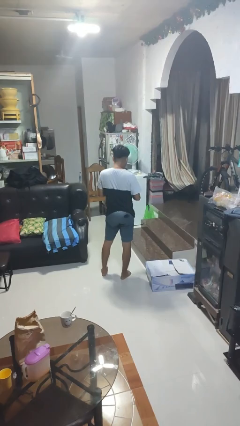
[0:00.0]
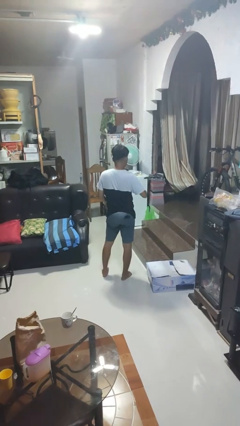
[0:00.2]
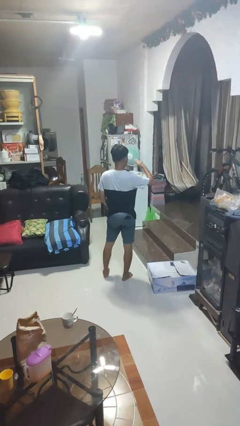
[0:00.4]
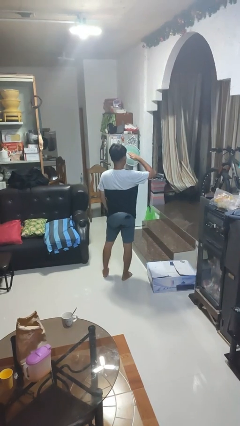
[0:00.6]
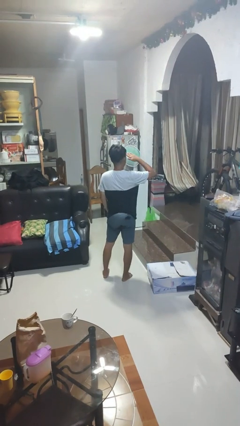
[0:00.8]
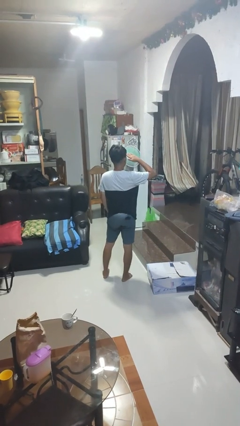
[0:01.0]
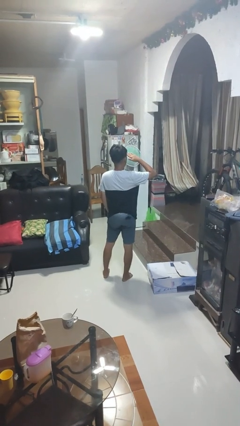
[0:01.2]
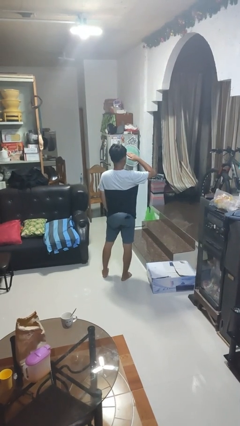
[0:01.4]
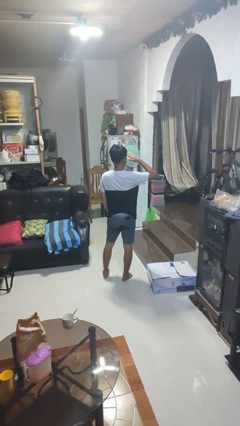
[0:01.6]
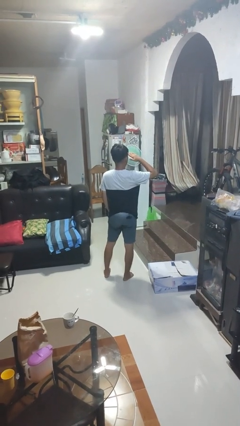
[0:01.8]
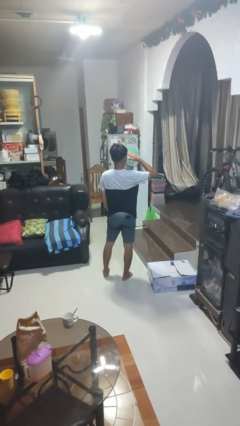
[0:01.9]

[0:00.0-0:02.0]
person salutes

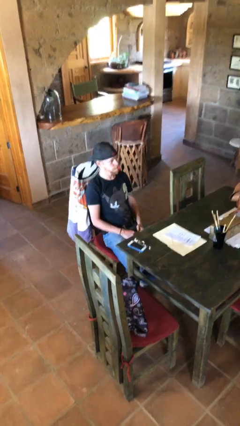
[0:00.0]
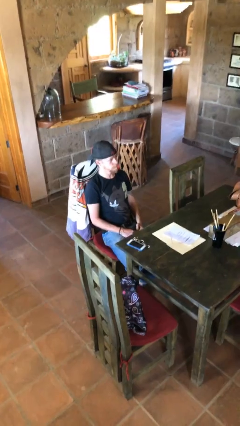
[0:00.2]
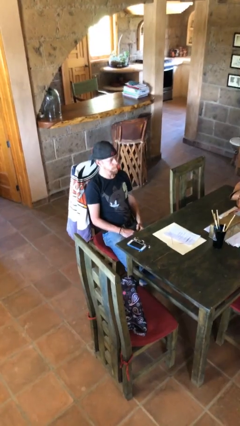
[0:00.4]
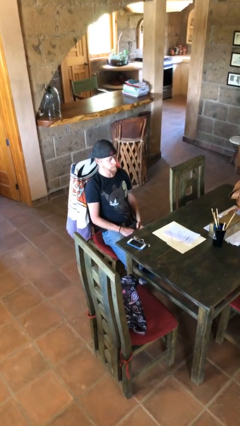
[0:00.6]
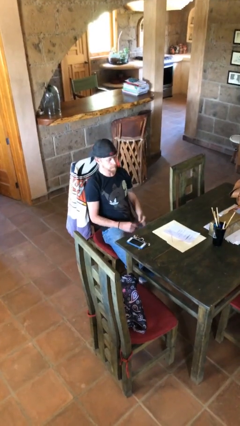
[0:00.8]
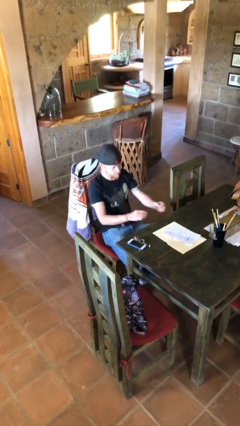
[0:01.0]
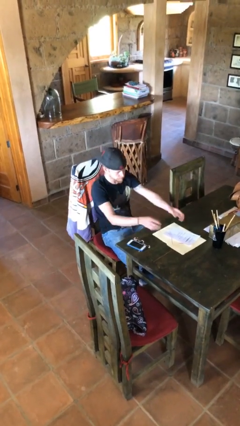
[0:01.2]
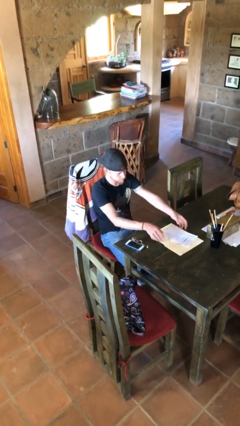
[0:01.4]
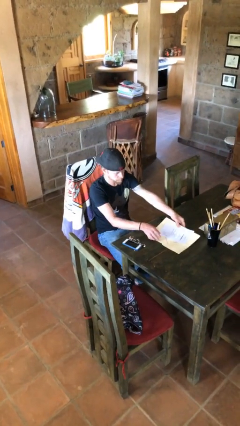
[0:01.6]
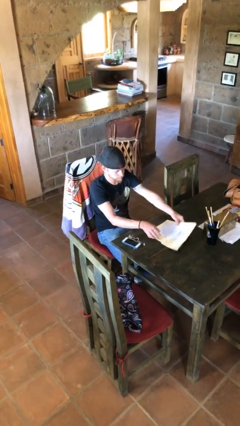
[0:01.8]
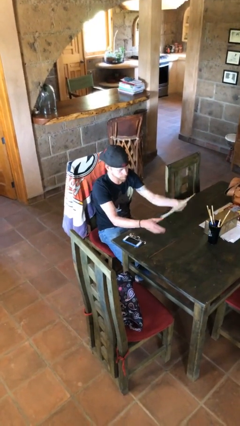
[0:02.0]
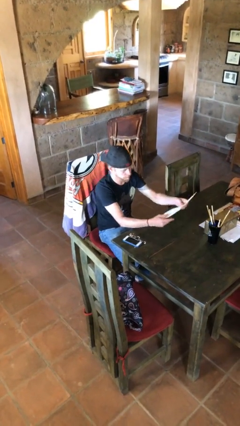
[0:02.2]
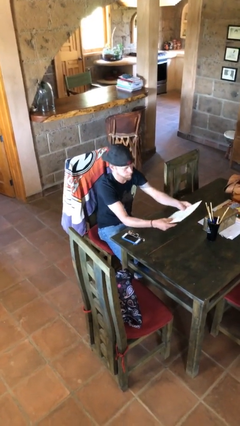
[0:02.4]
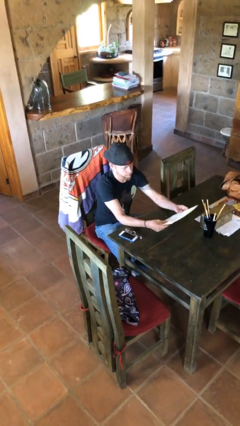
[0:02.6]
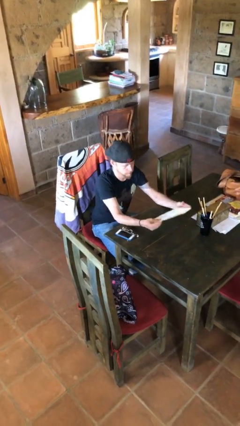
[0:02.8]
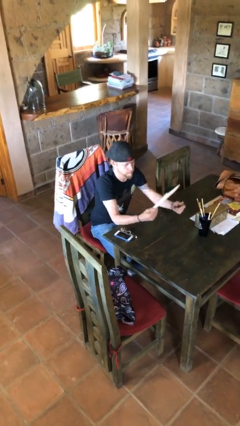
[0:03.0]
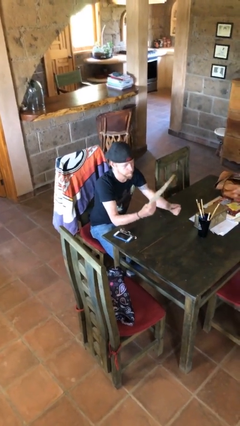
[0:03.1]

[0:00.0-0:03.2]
person picks up object from table

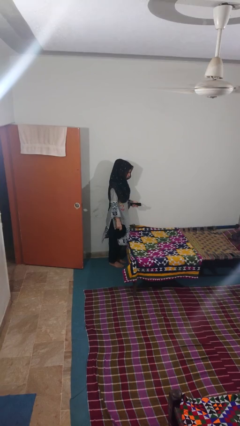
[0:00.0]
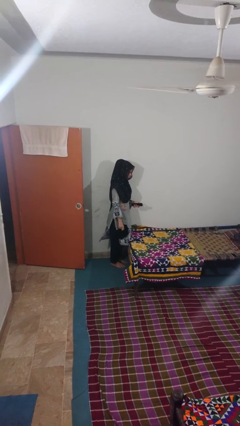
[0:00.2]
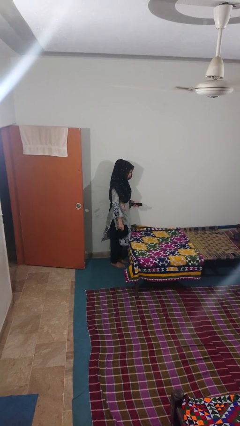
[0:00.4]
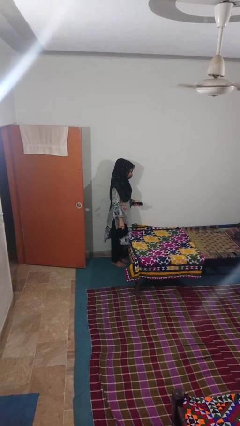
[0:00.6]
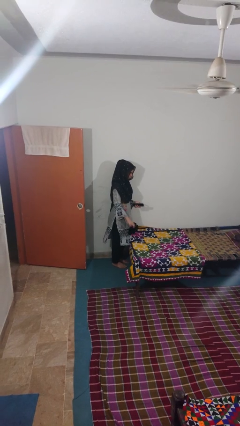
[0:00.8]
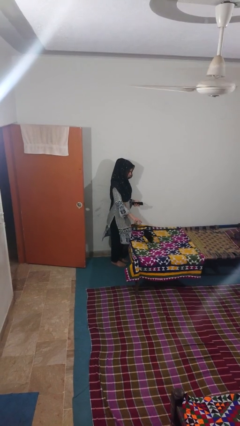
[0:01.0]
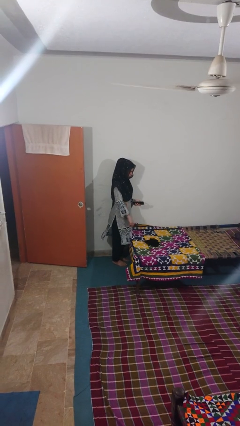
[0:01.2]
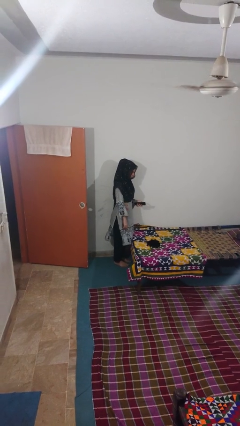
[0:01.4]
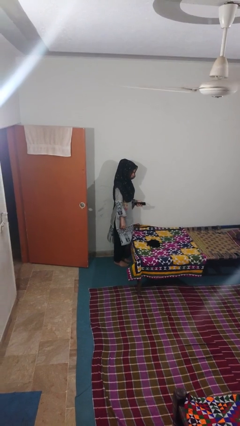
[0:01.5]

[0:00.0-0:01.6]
person throws object on bed

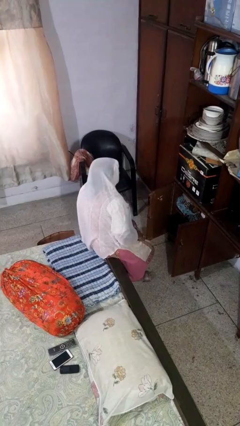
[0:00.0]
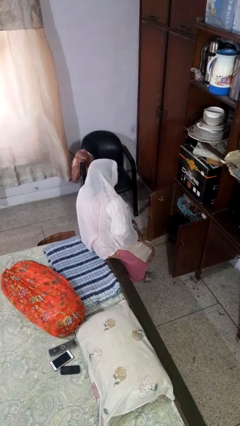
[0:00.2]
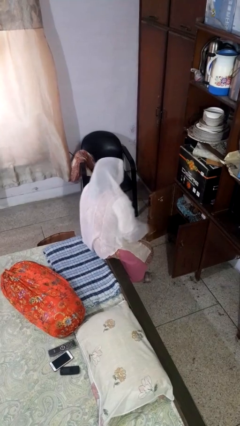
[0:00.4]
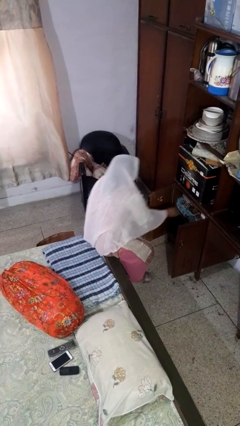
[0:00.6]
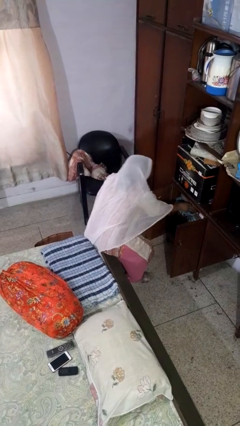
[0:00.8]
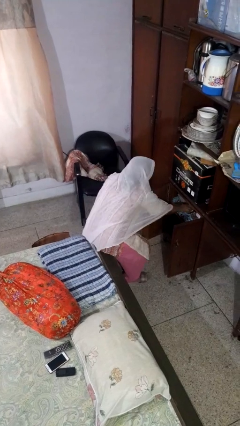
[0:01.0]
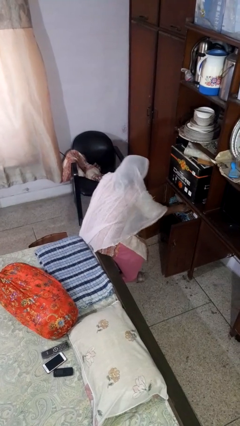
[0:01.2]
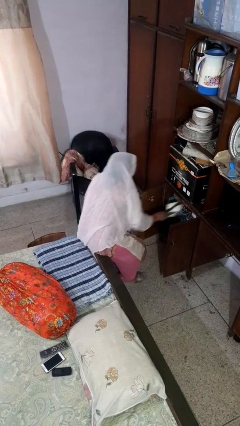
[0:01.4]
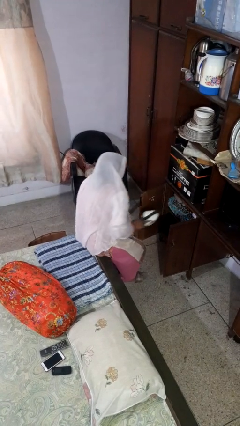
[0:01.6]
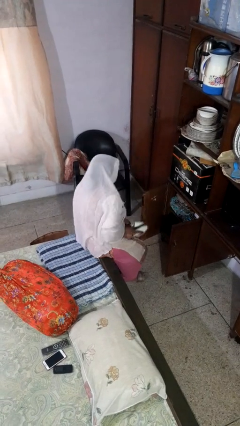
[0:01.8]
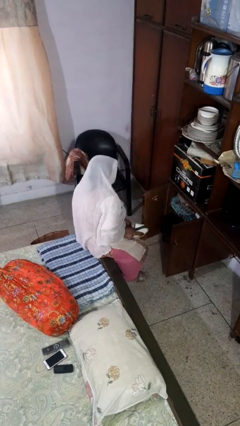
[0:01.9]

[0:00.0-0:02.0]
person takes object from cabinet

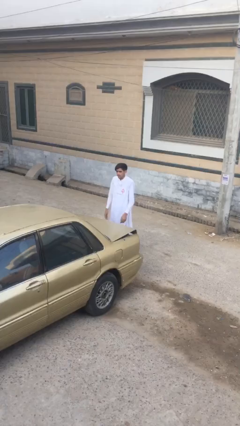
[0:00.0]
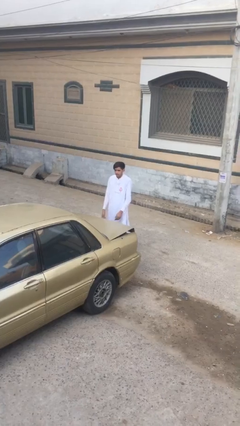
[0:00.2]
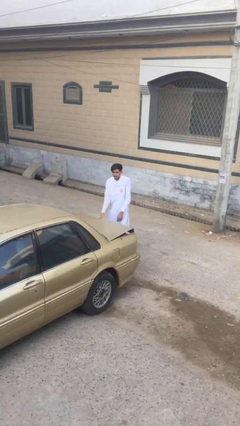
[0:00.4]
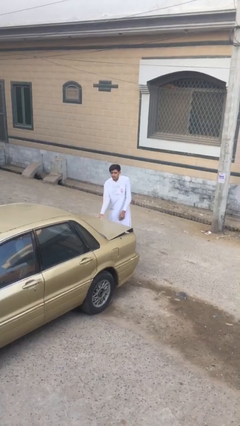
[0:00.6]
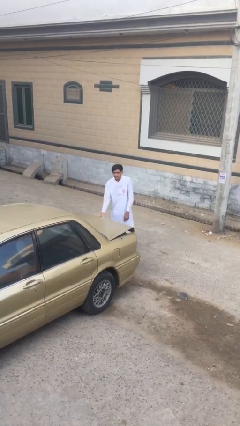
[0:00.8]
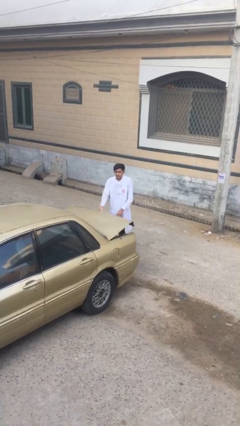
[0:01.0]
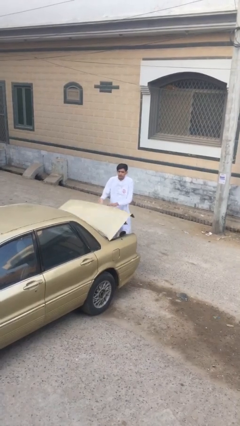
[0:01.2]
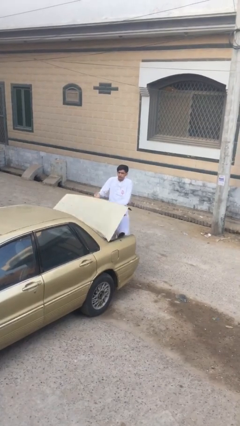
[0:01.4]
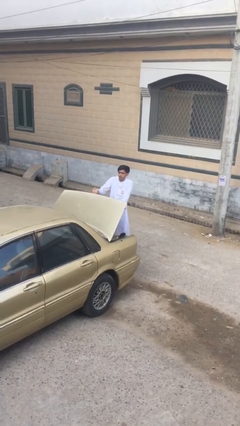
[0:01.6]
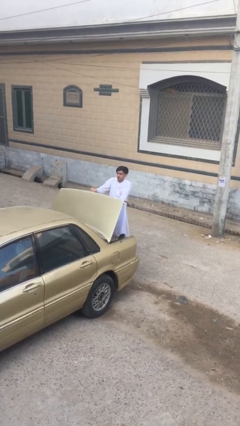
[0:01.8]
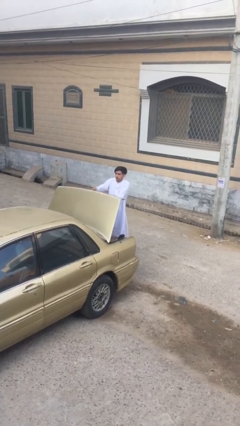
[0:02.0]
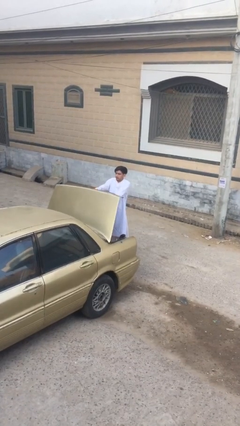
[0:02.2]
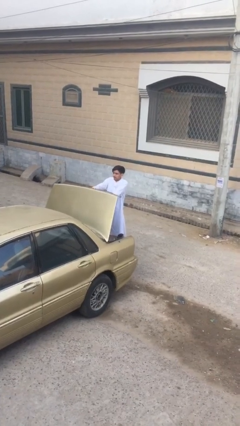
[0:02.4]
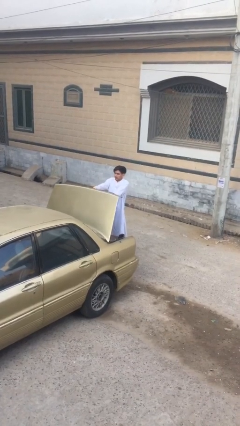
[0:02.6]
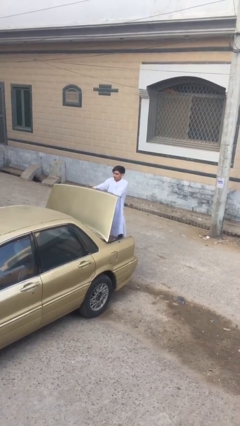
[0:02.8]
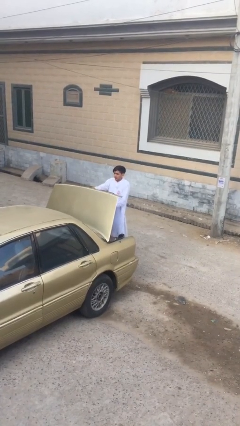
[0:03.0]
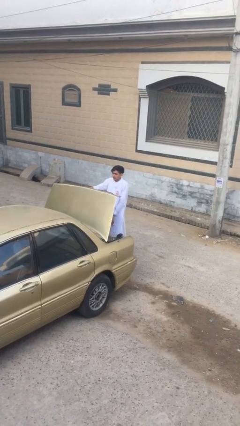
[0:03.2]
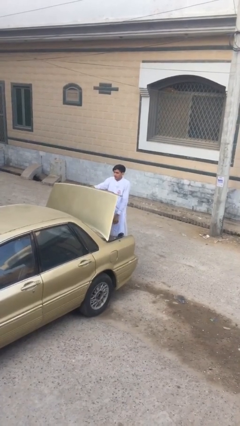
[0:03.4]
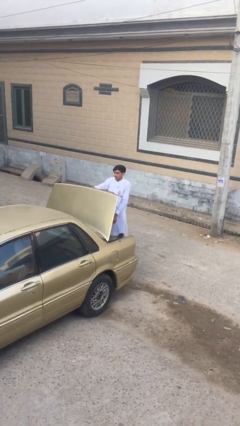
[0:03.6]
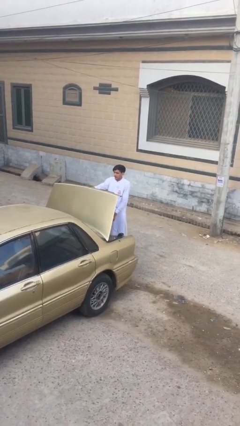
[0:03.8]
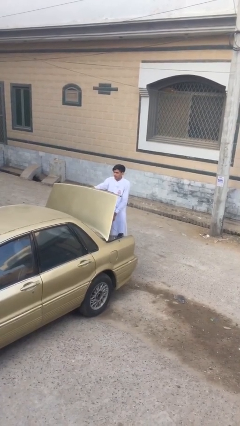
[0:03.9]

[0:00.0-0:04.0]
person opens car trunk

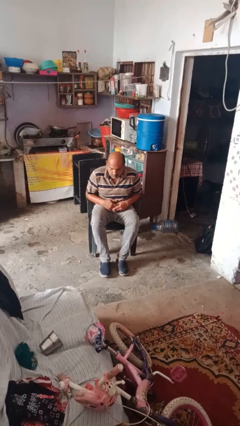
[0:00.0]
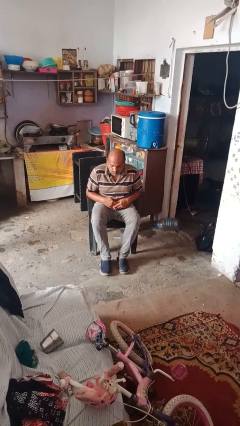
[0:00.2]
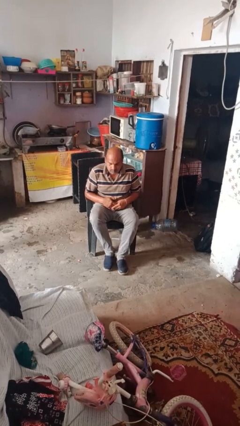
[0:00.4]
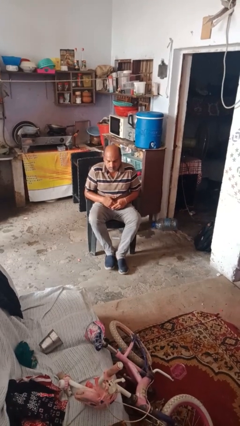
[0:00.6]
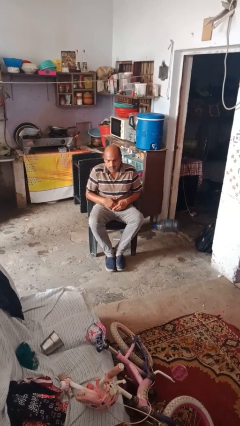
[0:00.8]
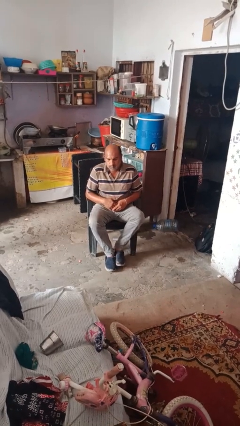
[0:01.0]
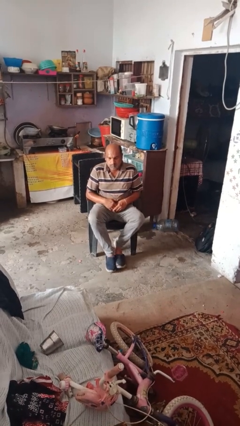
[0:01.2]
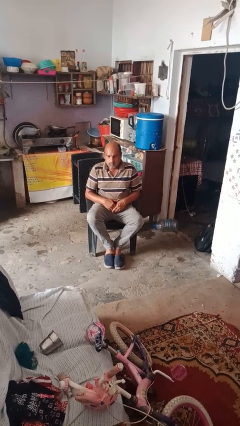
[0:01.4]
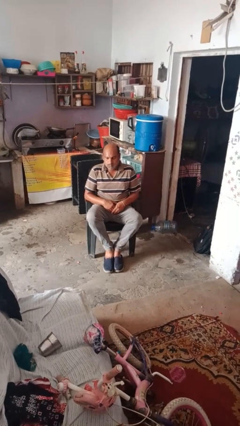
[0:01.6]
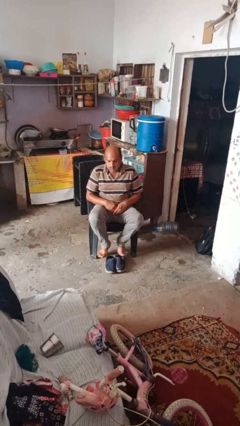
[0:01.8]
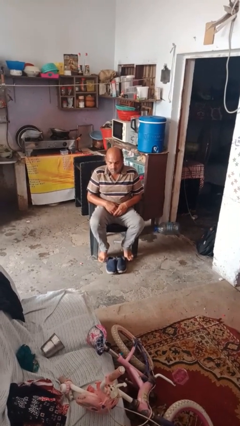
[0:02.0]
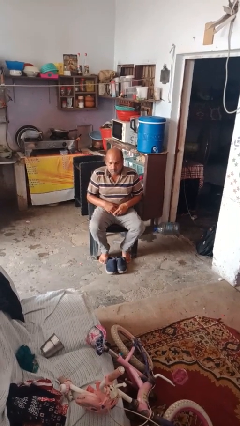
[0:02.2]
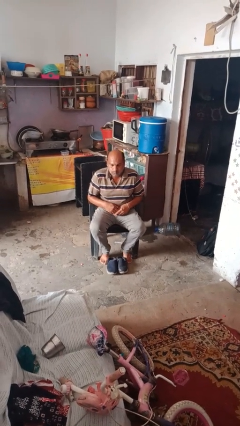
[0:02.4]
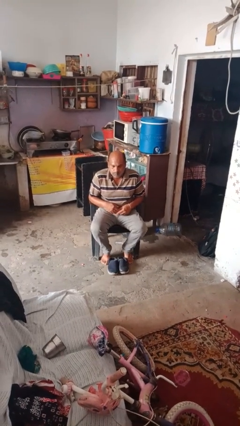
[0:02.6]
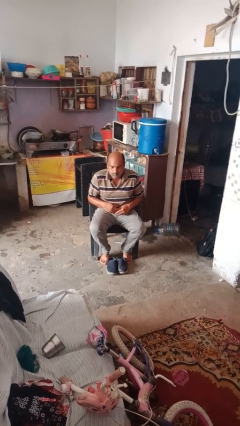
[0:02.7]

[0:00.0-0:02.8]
person takes off shoes

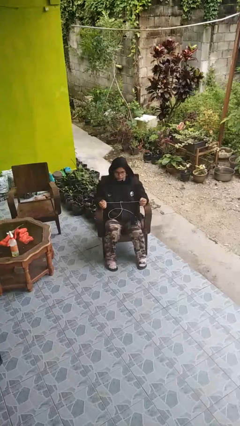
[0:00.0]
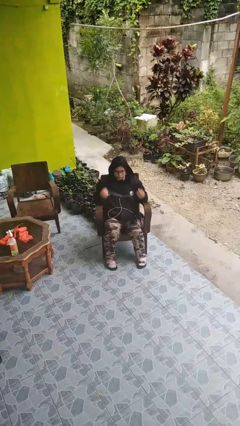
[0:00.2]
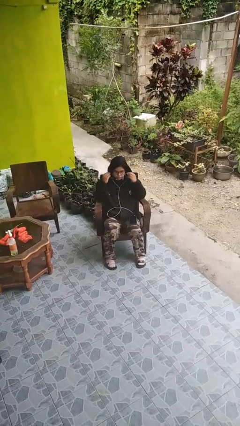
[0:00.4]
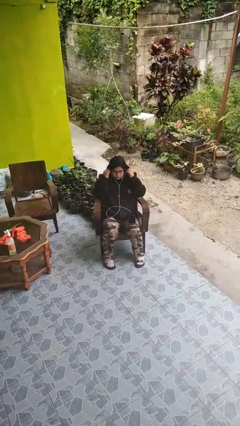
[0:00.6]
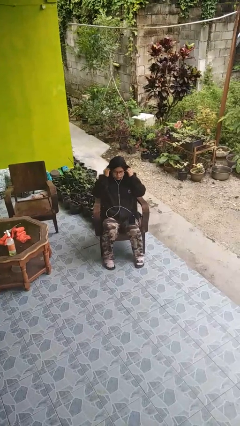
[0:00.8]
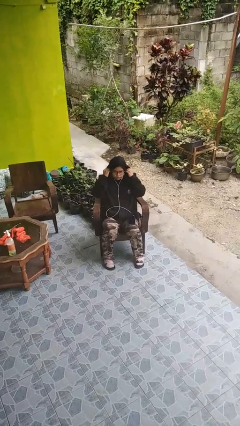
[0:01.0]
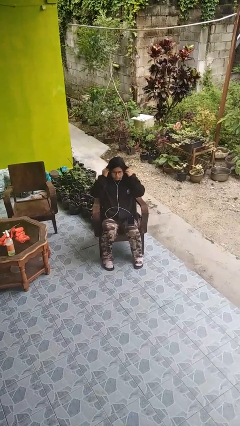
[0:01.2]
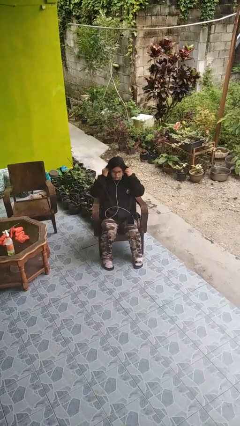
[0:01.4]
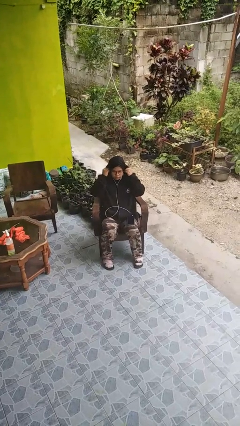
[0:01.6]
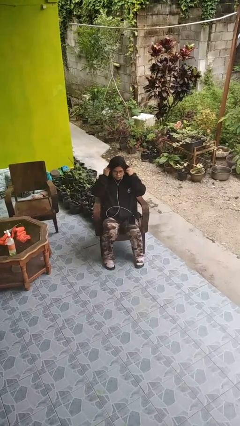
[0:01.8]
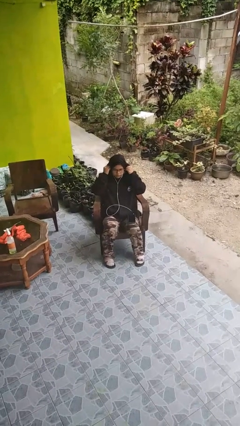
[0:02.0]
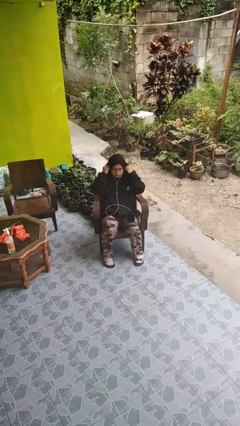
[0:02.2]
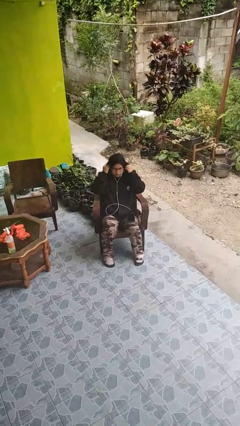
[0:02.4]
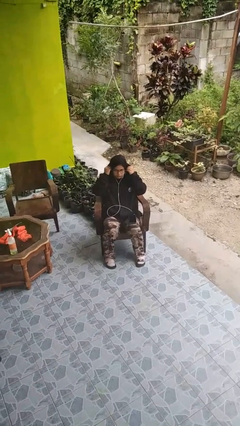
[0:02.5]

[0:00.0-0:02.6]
person puts on headphones
